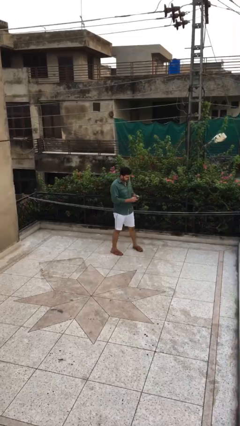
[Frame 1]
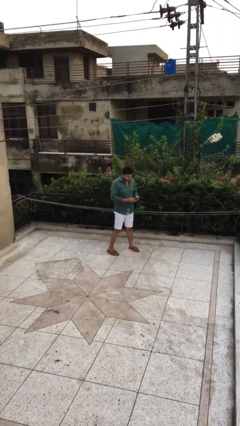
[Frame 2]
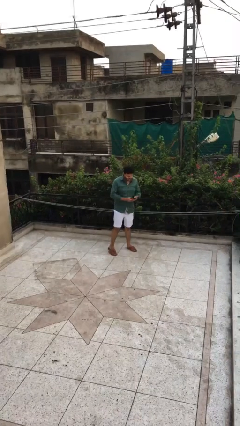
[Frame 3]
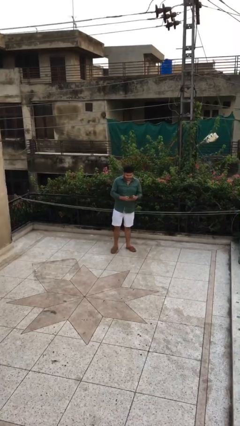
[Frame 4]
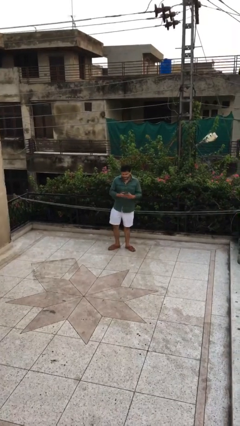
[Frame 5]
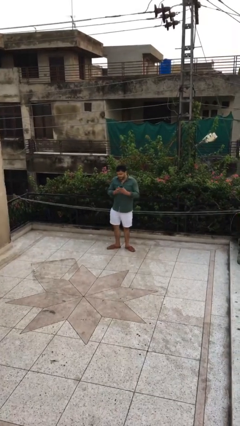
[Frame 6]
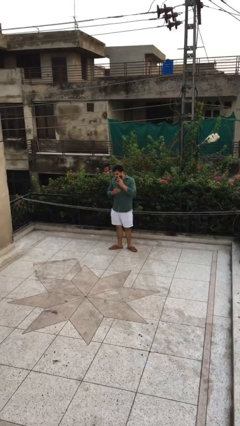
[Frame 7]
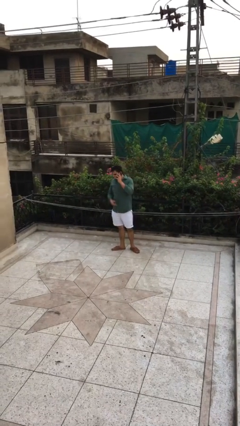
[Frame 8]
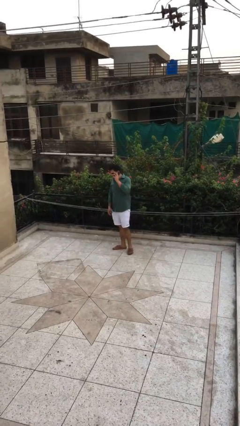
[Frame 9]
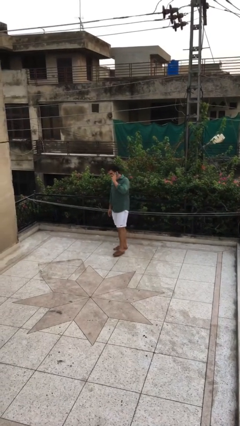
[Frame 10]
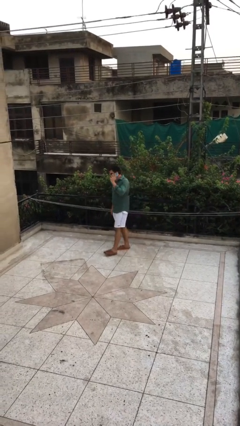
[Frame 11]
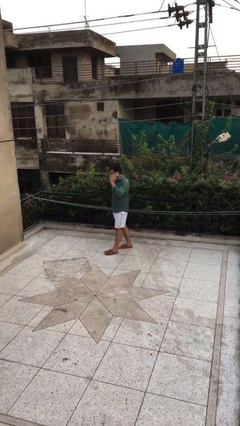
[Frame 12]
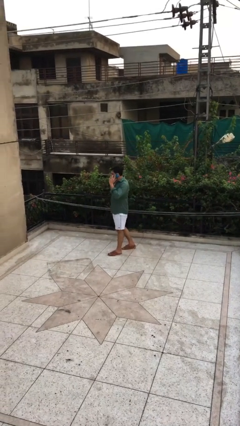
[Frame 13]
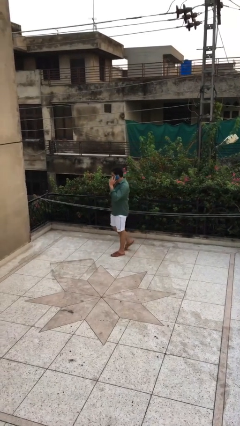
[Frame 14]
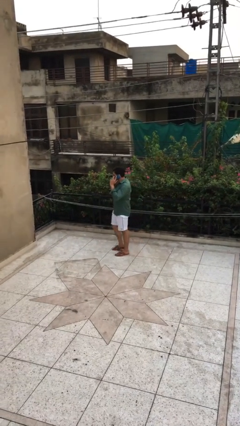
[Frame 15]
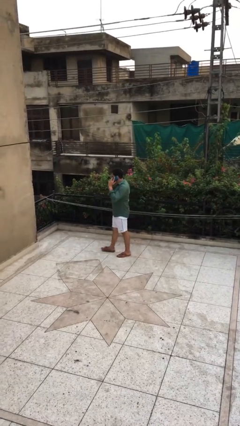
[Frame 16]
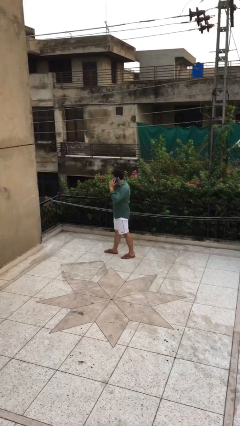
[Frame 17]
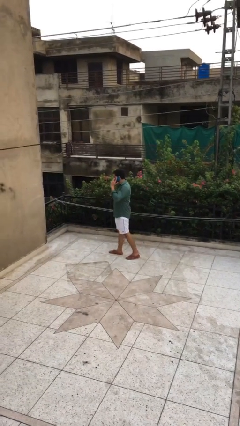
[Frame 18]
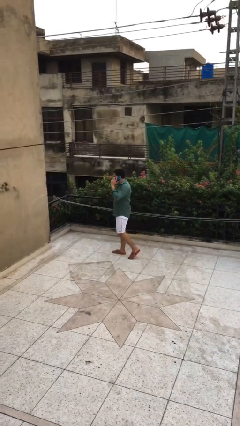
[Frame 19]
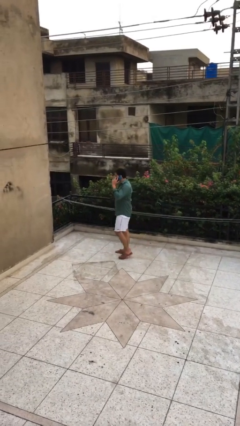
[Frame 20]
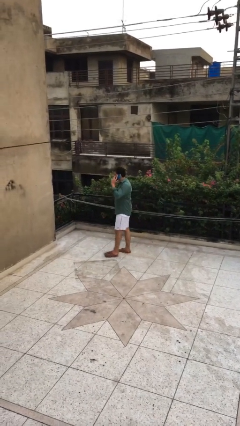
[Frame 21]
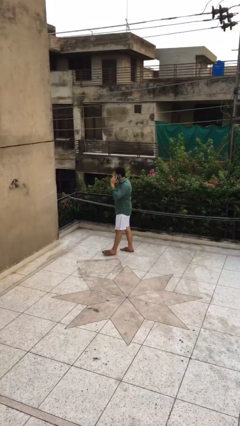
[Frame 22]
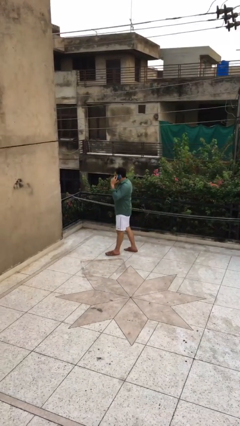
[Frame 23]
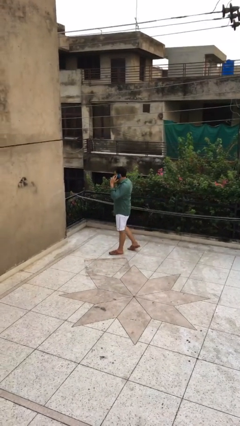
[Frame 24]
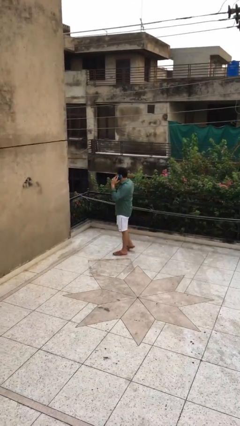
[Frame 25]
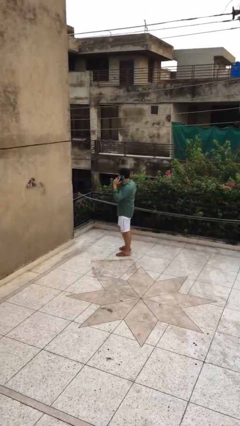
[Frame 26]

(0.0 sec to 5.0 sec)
person talks on phone

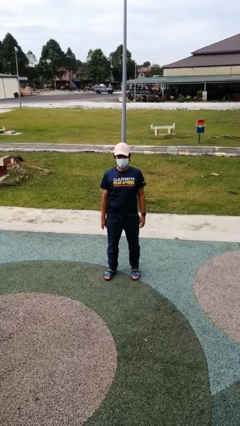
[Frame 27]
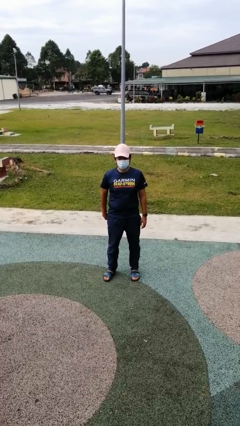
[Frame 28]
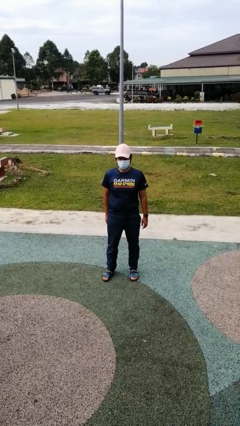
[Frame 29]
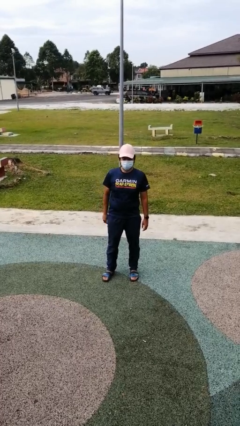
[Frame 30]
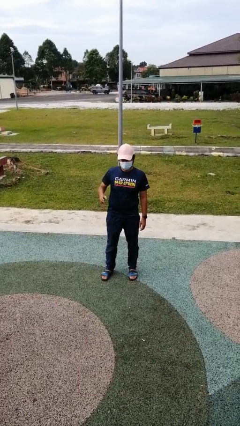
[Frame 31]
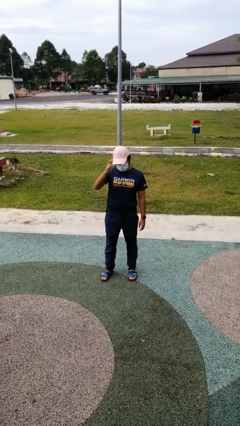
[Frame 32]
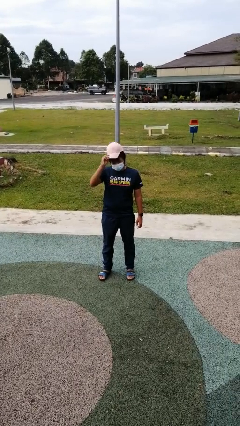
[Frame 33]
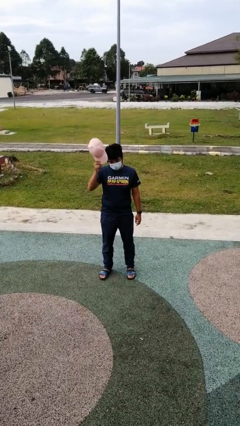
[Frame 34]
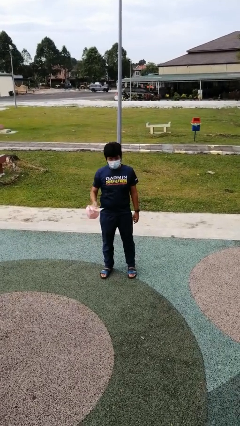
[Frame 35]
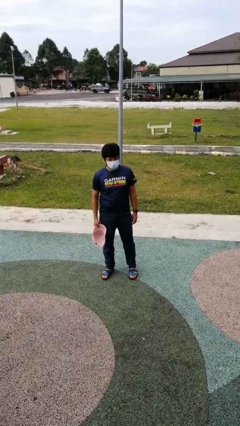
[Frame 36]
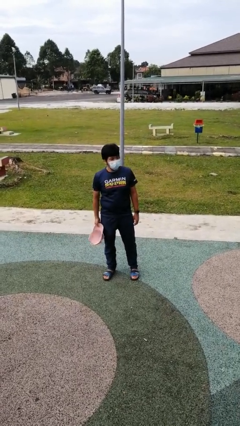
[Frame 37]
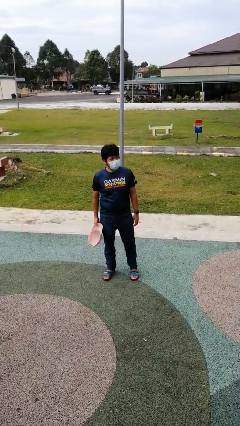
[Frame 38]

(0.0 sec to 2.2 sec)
person takes off hat

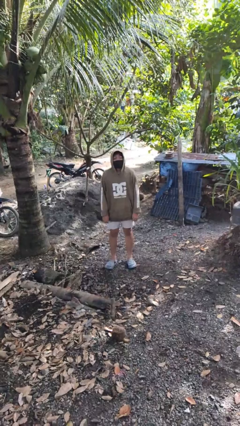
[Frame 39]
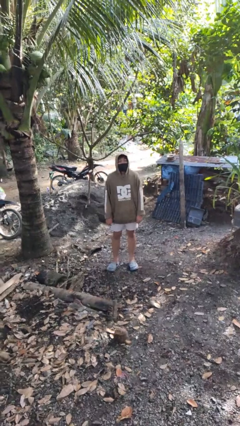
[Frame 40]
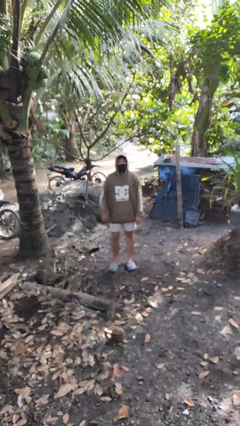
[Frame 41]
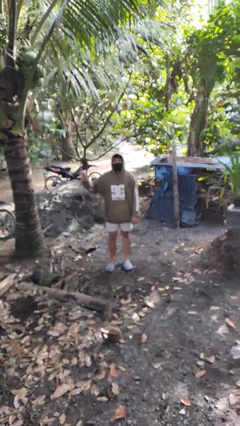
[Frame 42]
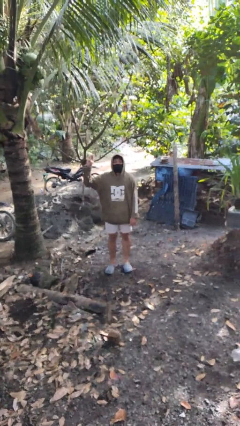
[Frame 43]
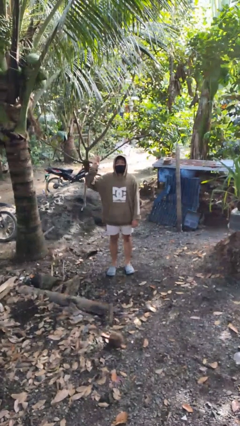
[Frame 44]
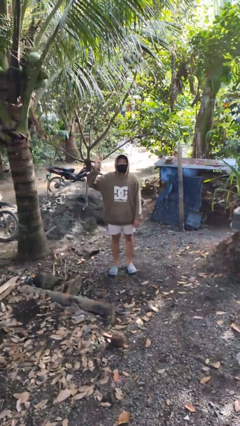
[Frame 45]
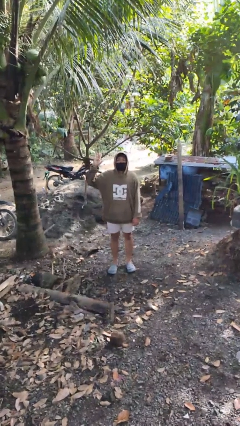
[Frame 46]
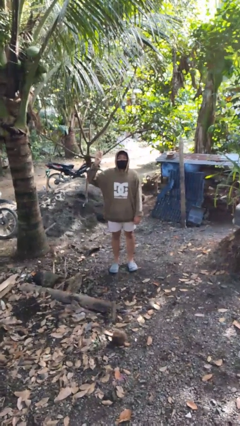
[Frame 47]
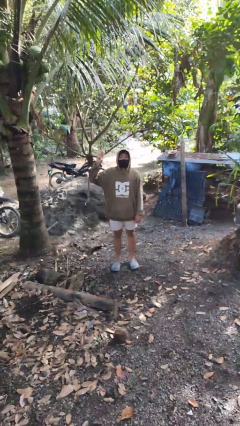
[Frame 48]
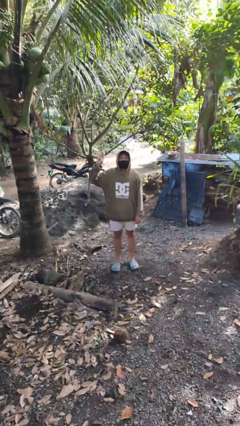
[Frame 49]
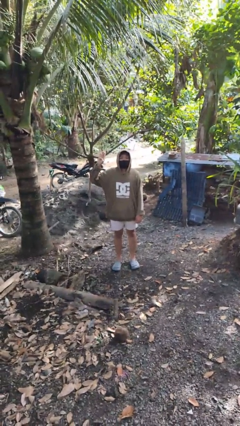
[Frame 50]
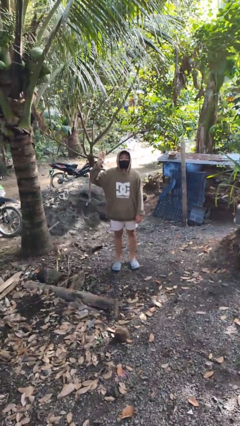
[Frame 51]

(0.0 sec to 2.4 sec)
person gestures number four

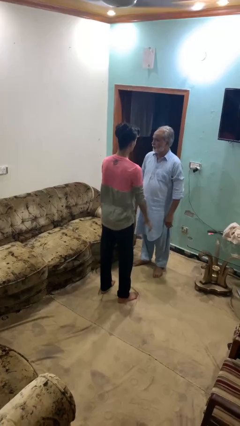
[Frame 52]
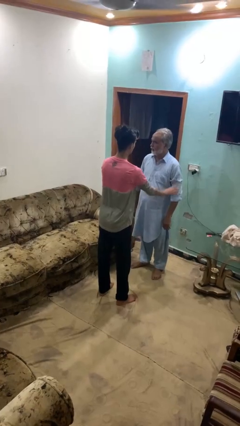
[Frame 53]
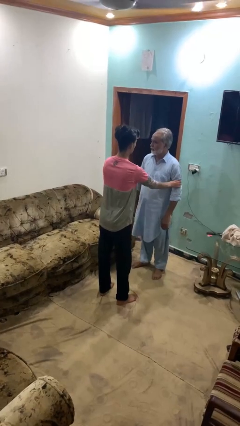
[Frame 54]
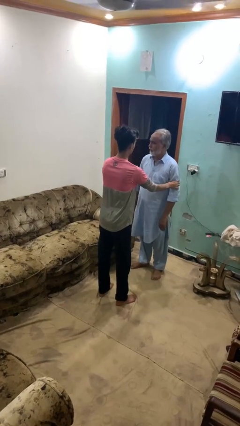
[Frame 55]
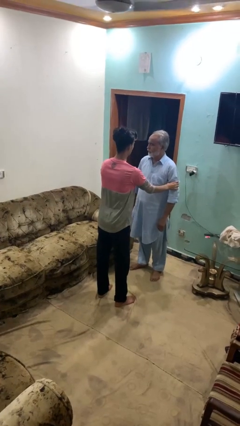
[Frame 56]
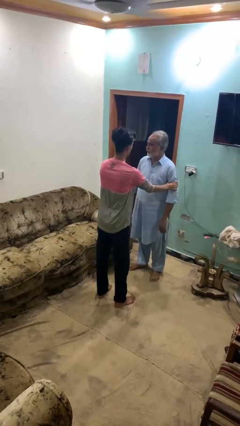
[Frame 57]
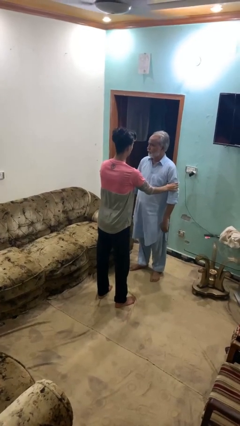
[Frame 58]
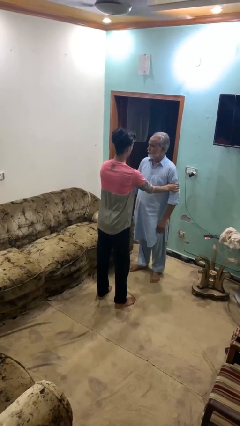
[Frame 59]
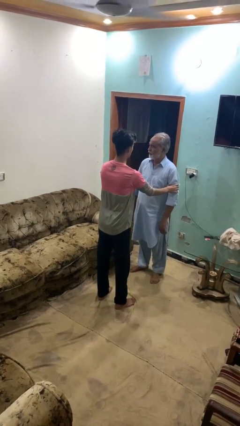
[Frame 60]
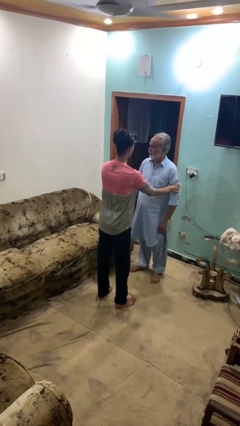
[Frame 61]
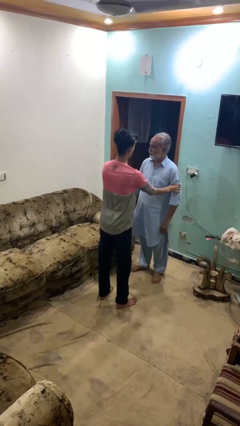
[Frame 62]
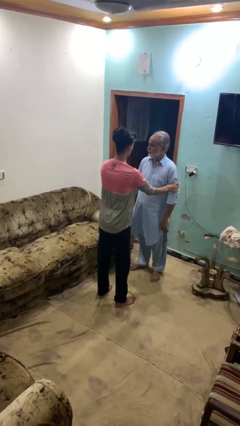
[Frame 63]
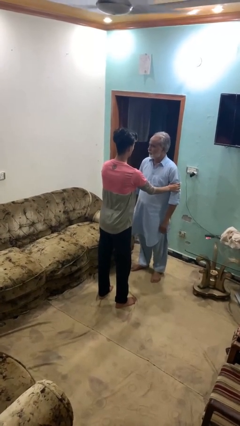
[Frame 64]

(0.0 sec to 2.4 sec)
person grabs person by bicep

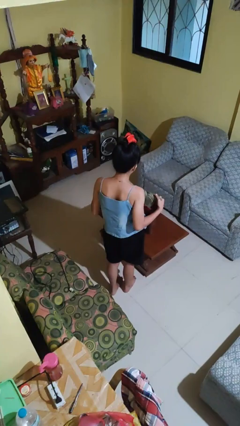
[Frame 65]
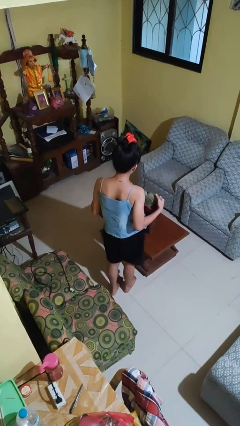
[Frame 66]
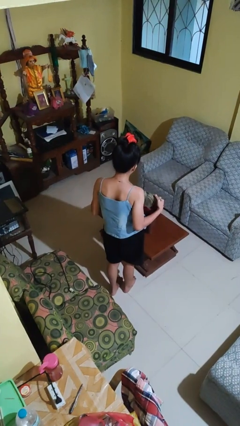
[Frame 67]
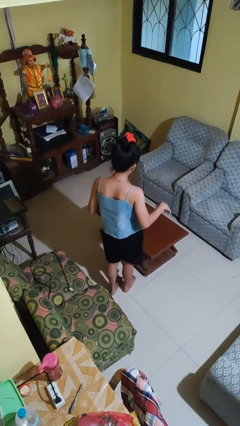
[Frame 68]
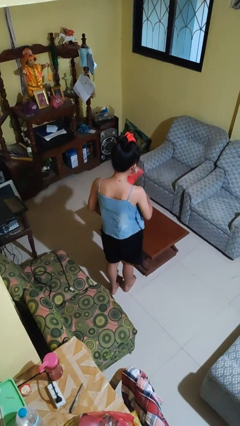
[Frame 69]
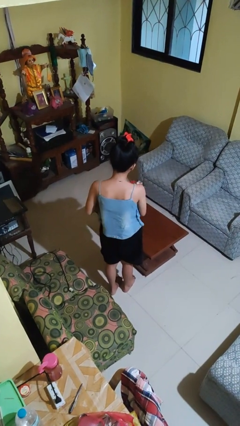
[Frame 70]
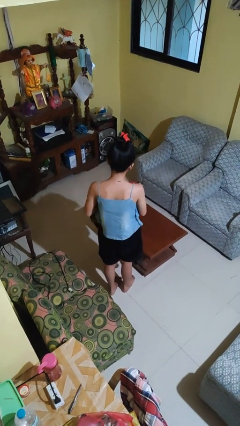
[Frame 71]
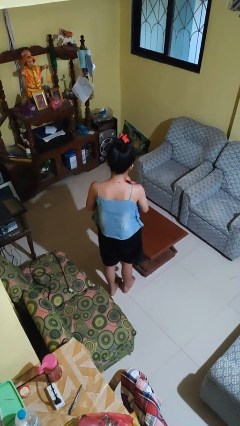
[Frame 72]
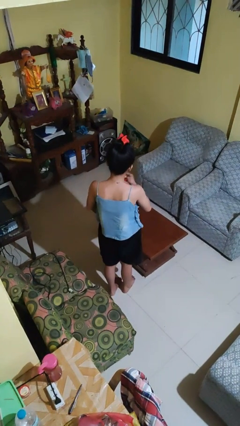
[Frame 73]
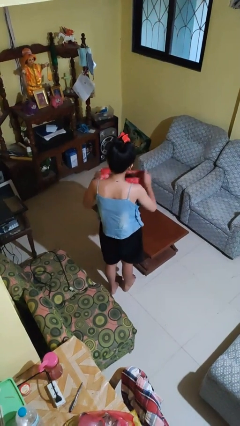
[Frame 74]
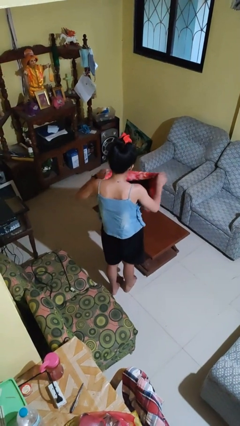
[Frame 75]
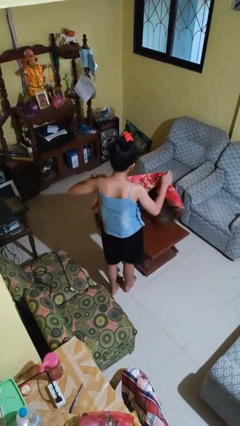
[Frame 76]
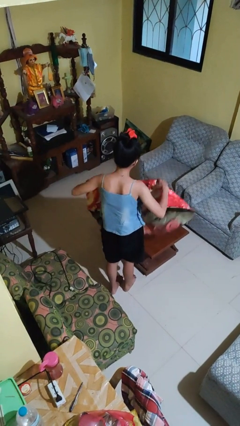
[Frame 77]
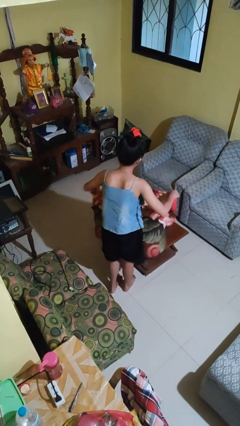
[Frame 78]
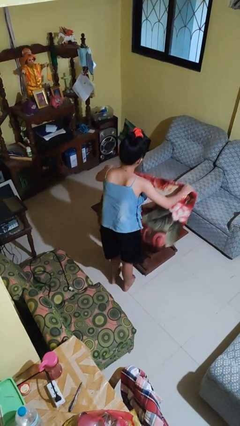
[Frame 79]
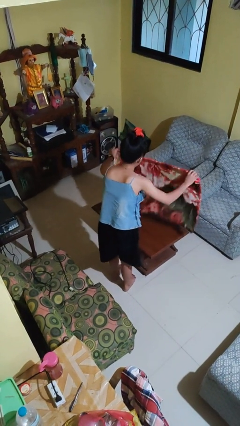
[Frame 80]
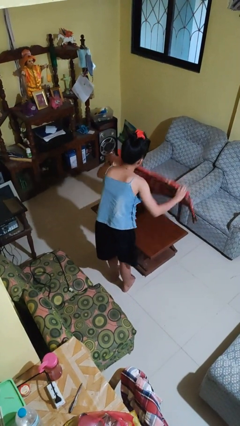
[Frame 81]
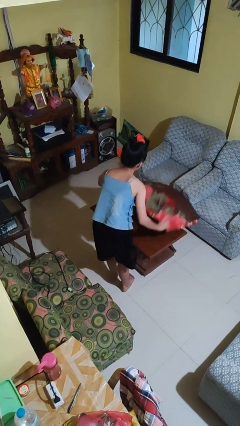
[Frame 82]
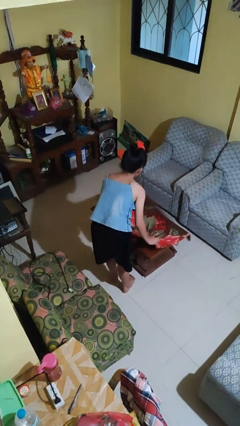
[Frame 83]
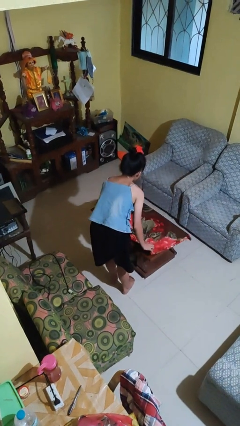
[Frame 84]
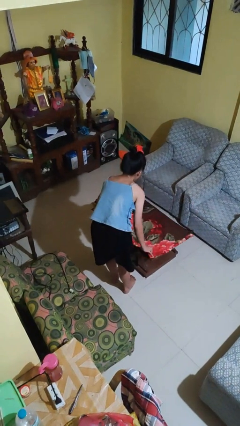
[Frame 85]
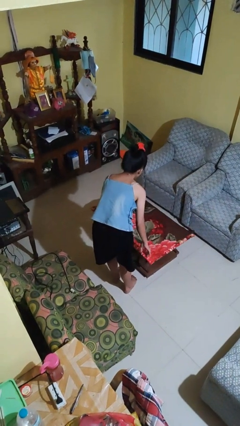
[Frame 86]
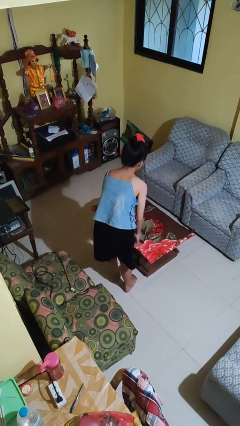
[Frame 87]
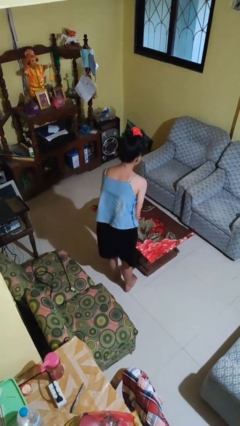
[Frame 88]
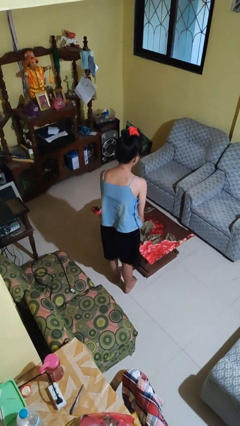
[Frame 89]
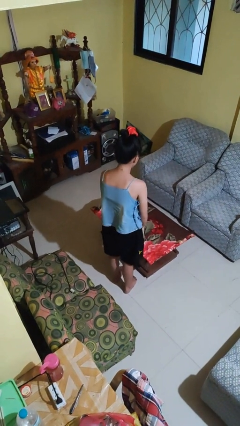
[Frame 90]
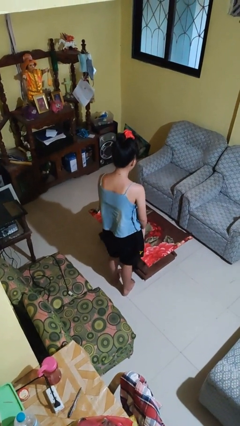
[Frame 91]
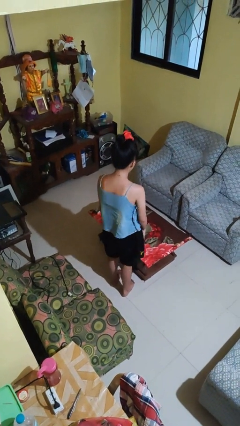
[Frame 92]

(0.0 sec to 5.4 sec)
person spreads tablecloth

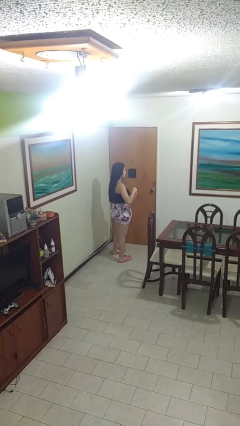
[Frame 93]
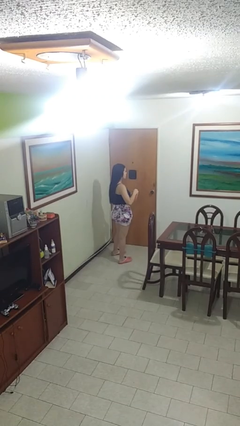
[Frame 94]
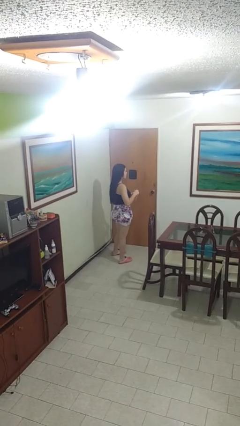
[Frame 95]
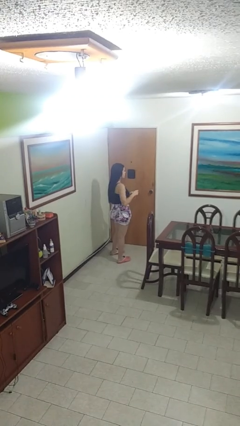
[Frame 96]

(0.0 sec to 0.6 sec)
person stirs mug
